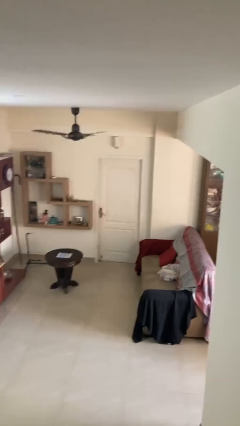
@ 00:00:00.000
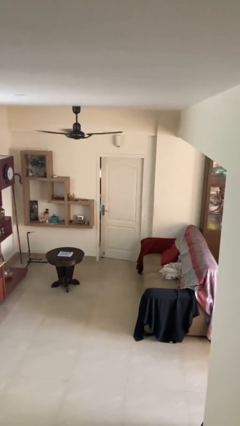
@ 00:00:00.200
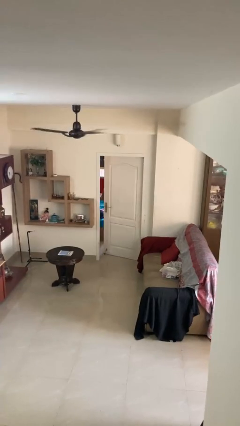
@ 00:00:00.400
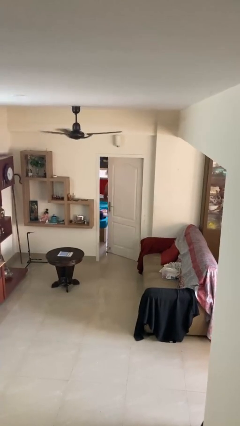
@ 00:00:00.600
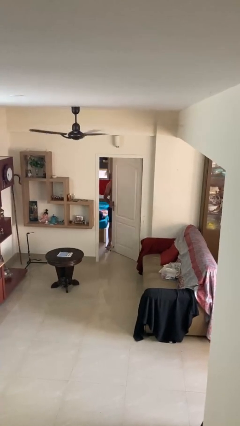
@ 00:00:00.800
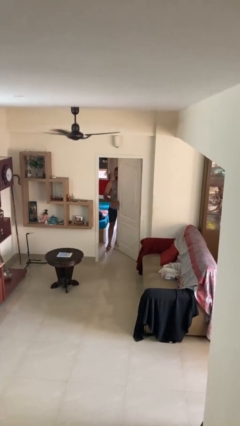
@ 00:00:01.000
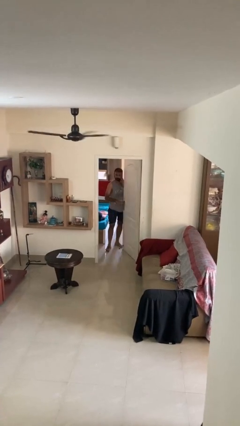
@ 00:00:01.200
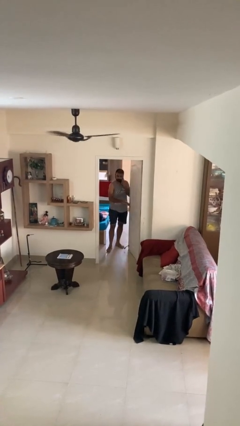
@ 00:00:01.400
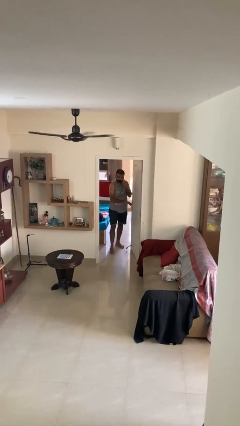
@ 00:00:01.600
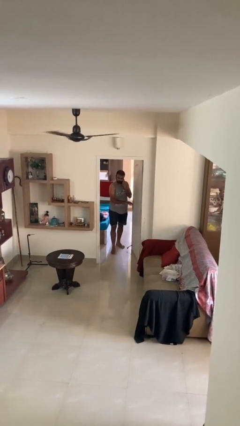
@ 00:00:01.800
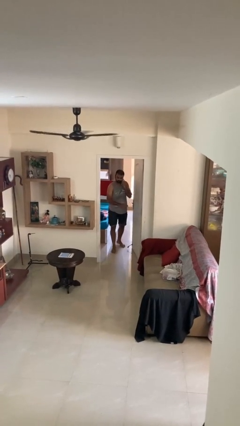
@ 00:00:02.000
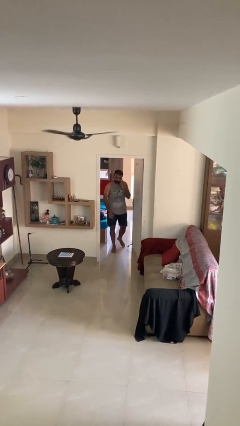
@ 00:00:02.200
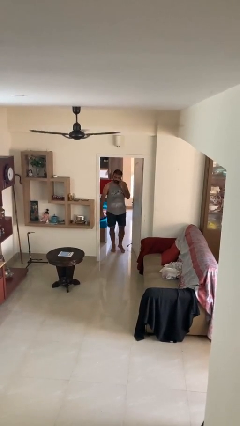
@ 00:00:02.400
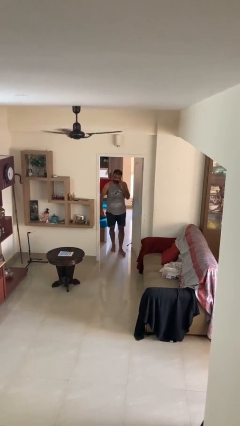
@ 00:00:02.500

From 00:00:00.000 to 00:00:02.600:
person opens facility door

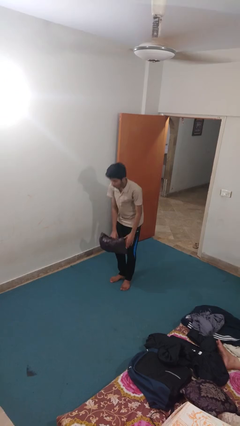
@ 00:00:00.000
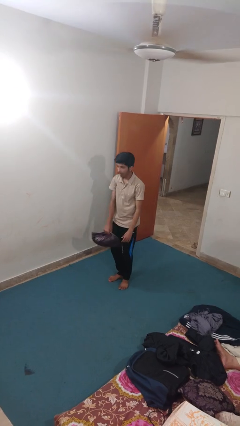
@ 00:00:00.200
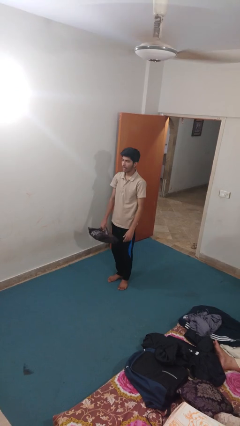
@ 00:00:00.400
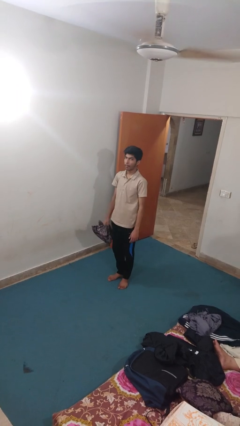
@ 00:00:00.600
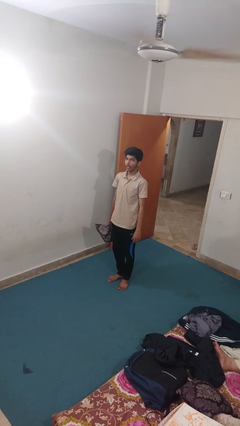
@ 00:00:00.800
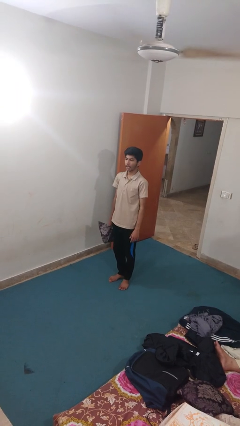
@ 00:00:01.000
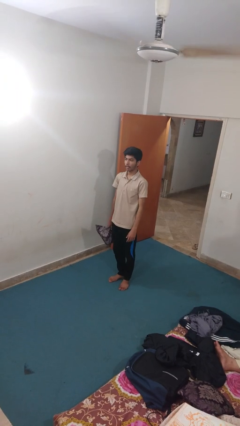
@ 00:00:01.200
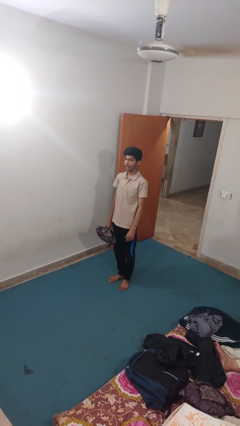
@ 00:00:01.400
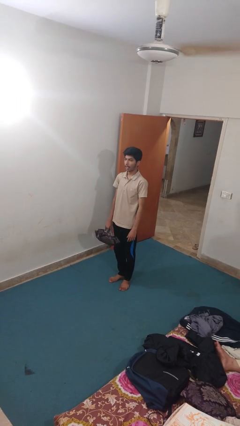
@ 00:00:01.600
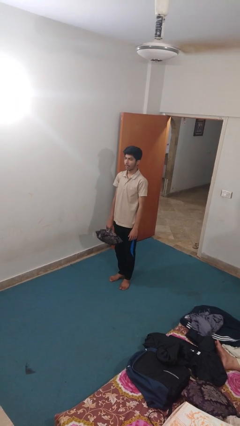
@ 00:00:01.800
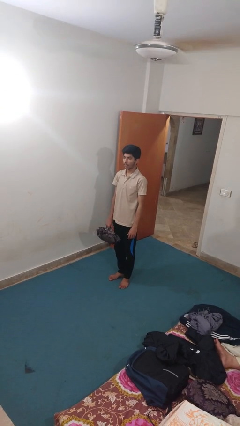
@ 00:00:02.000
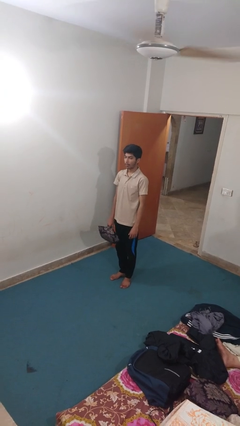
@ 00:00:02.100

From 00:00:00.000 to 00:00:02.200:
person picks up object from floor

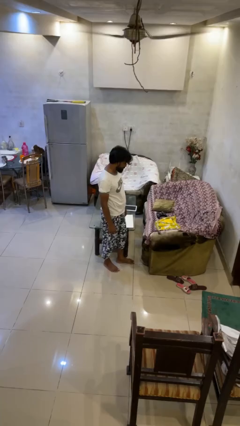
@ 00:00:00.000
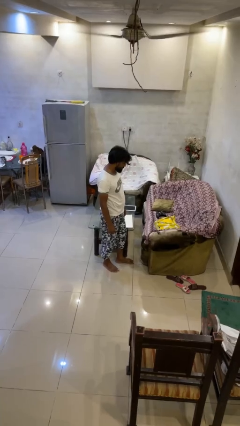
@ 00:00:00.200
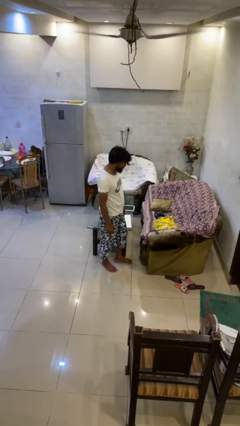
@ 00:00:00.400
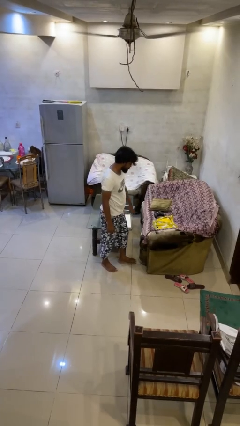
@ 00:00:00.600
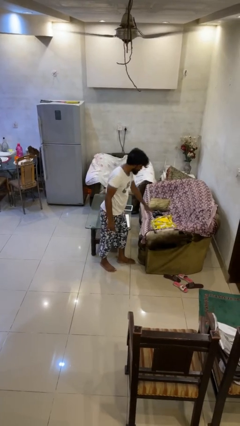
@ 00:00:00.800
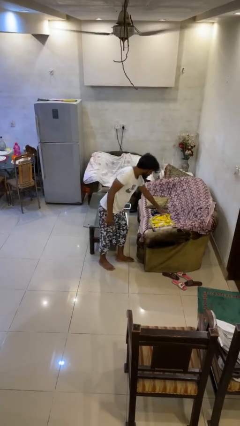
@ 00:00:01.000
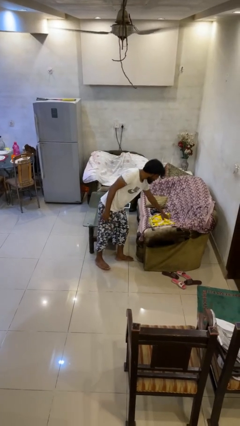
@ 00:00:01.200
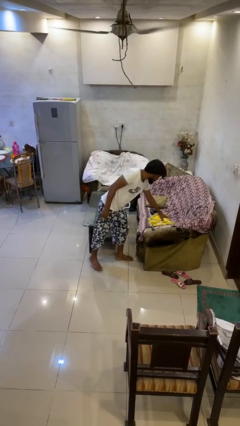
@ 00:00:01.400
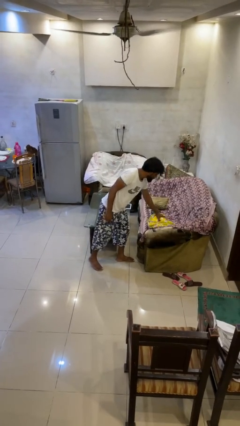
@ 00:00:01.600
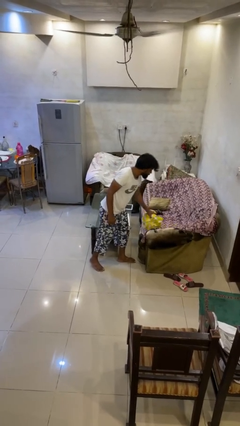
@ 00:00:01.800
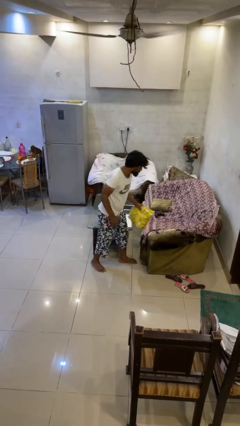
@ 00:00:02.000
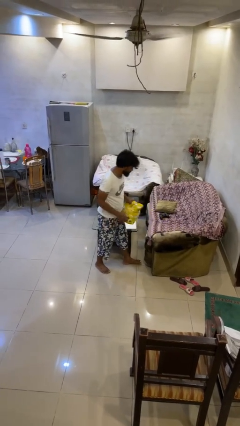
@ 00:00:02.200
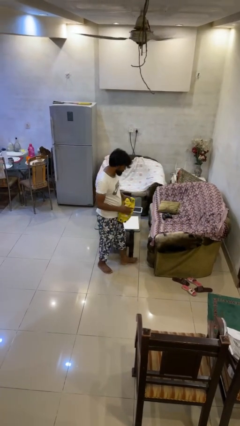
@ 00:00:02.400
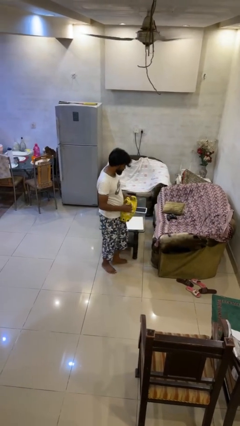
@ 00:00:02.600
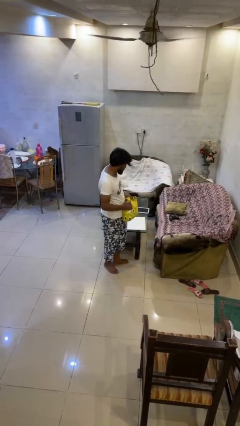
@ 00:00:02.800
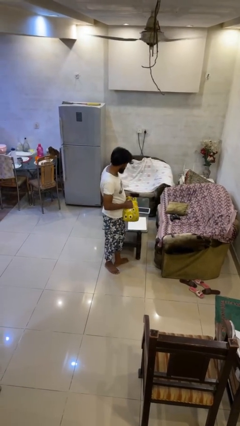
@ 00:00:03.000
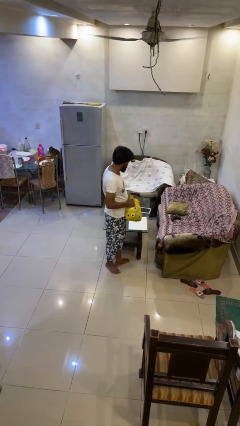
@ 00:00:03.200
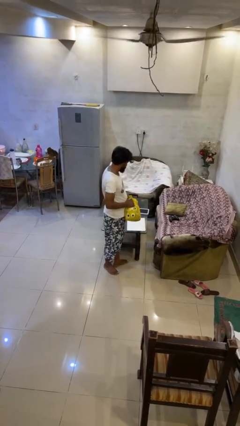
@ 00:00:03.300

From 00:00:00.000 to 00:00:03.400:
person picks up object from couch

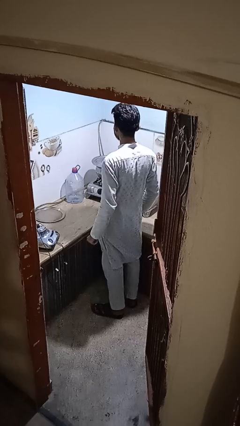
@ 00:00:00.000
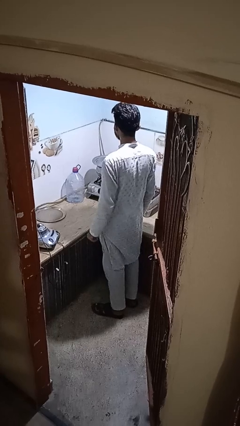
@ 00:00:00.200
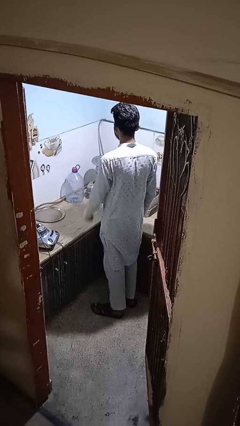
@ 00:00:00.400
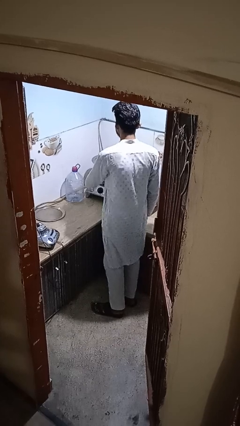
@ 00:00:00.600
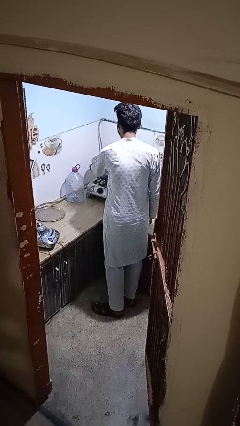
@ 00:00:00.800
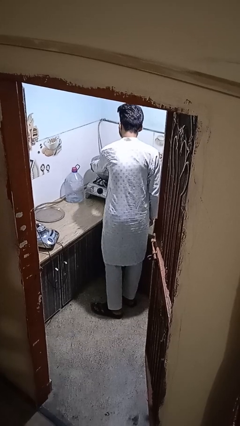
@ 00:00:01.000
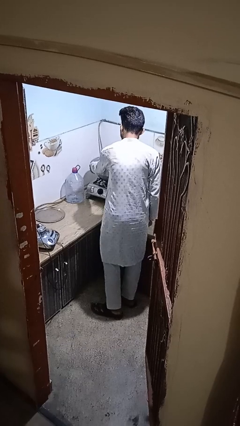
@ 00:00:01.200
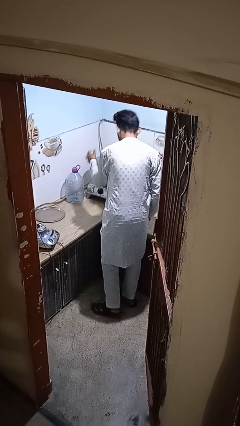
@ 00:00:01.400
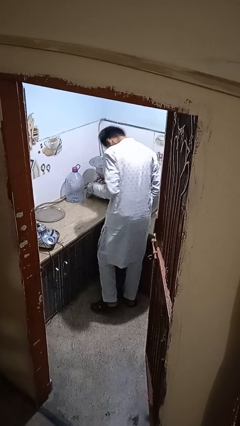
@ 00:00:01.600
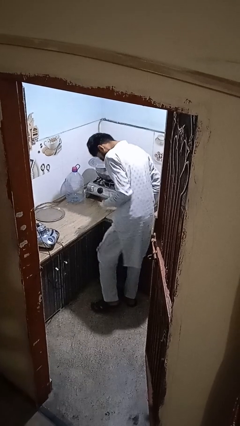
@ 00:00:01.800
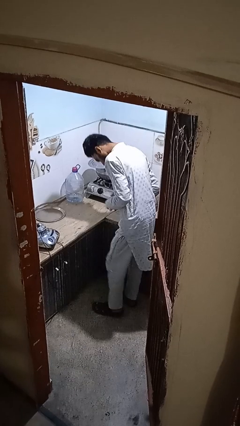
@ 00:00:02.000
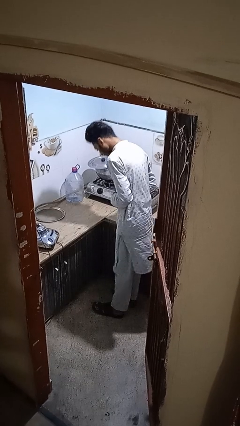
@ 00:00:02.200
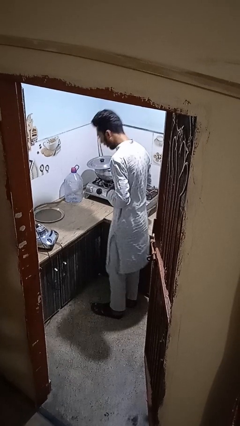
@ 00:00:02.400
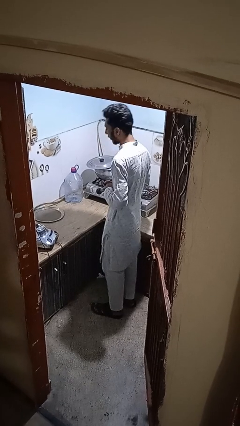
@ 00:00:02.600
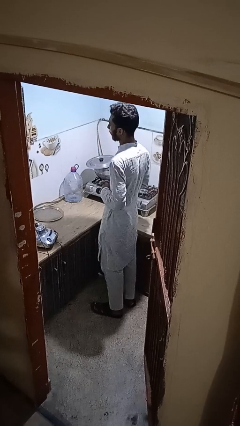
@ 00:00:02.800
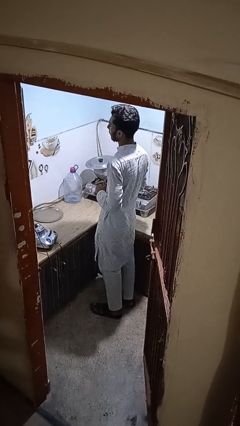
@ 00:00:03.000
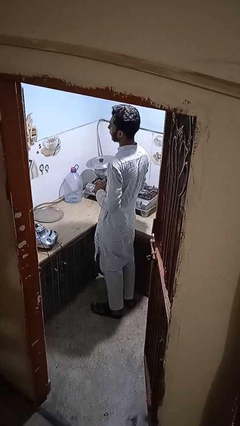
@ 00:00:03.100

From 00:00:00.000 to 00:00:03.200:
person burns hand

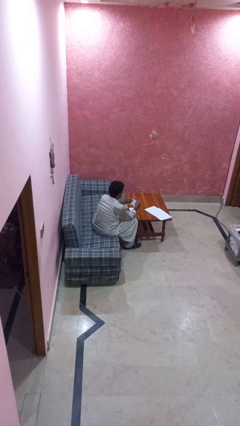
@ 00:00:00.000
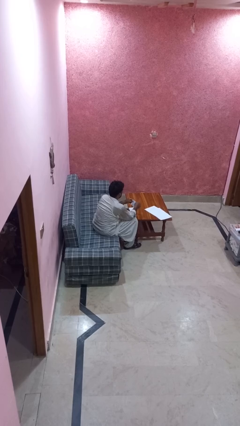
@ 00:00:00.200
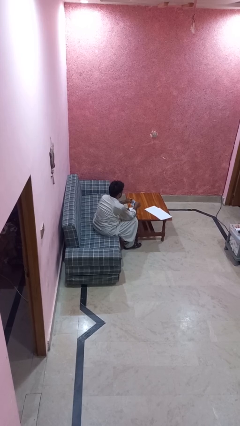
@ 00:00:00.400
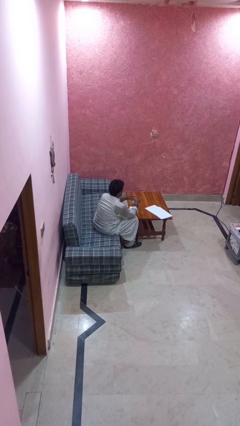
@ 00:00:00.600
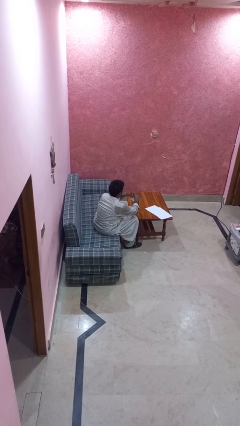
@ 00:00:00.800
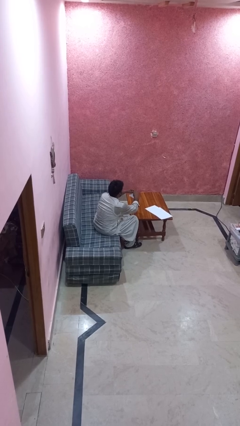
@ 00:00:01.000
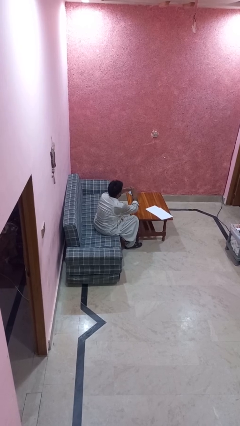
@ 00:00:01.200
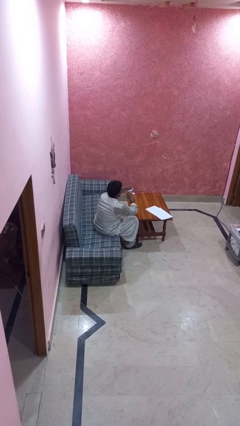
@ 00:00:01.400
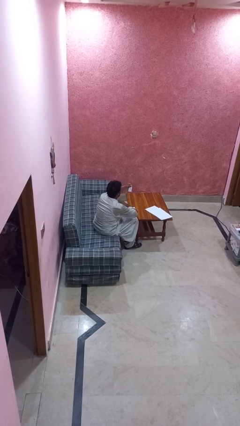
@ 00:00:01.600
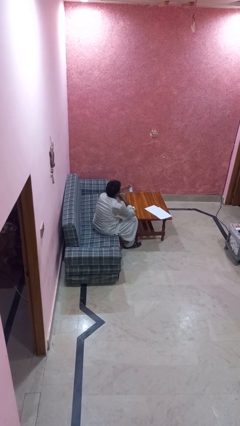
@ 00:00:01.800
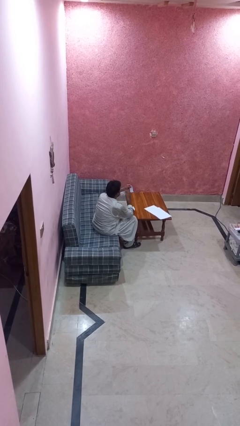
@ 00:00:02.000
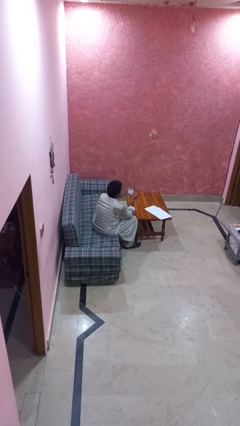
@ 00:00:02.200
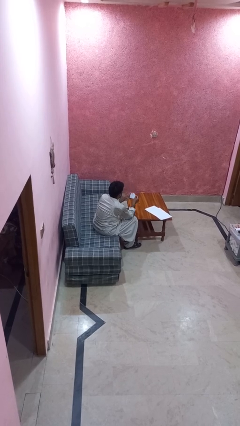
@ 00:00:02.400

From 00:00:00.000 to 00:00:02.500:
person tears paper

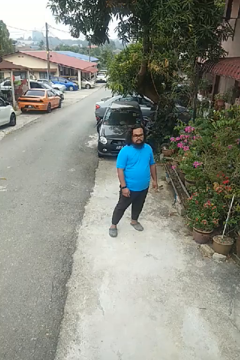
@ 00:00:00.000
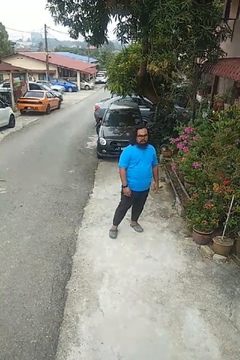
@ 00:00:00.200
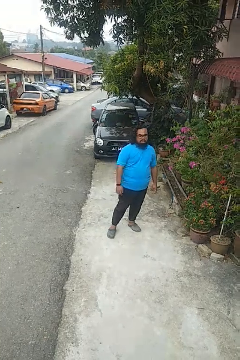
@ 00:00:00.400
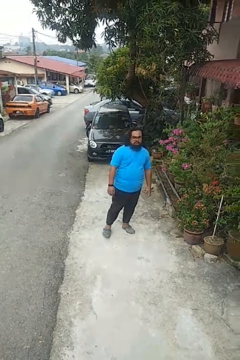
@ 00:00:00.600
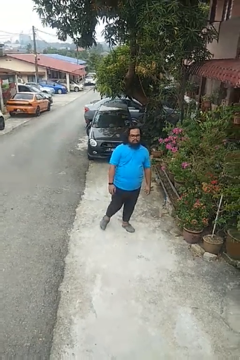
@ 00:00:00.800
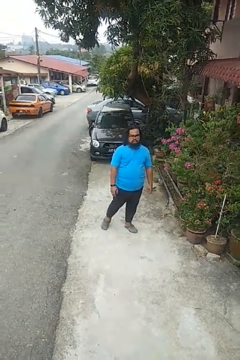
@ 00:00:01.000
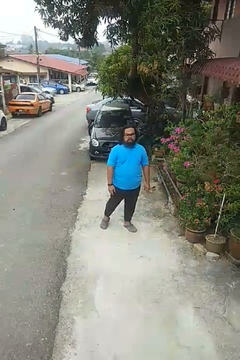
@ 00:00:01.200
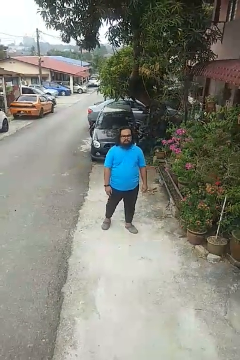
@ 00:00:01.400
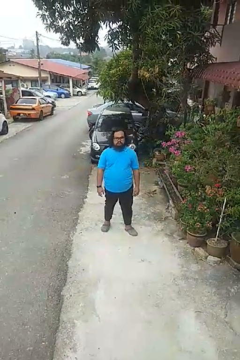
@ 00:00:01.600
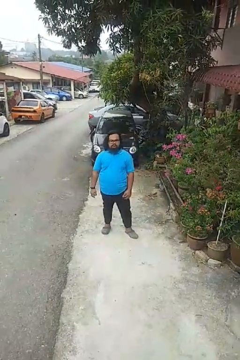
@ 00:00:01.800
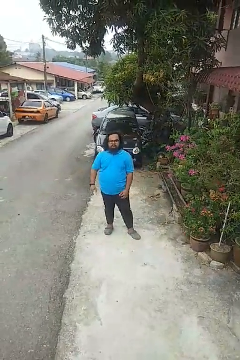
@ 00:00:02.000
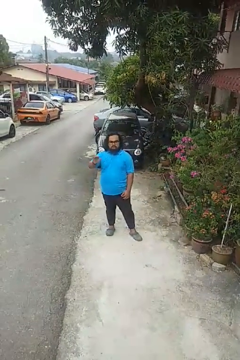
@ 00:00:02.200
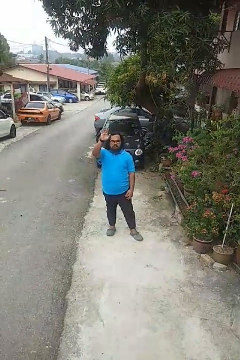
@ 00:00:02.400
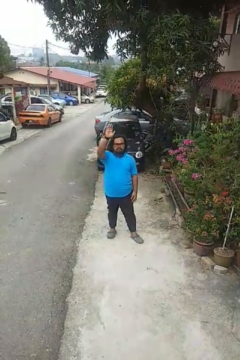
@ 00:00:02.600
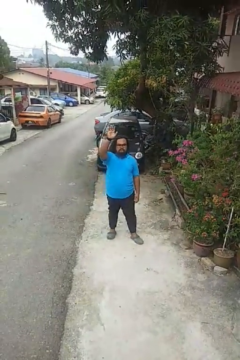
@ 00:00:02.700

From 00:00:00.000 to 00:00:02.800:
person gestures raise hand

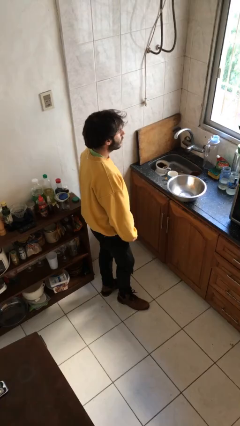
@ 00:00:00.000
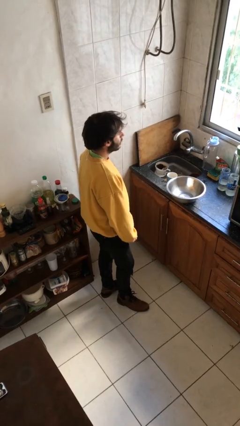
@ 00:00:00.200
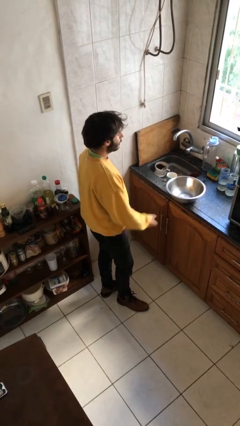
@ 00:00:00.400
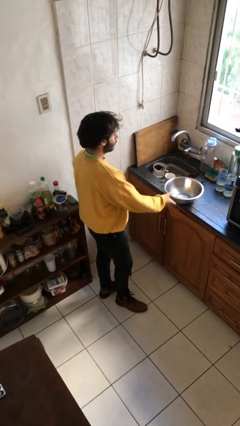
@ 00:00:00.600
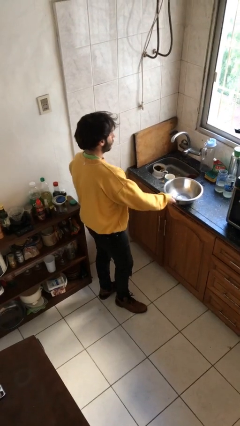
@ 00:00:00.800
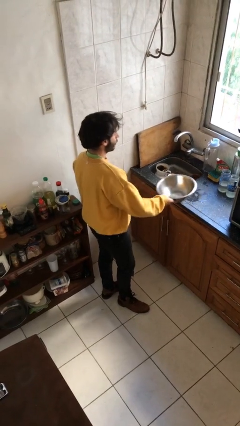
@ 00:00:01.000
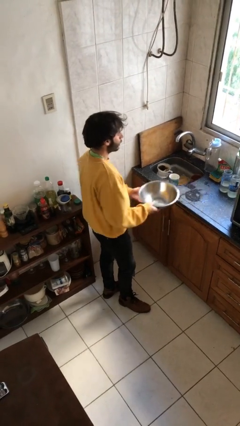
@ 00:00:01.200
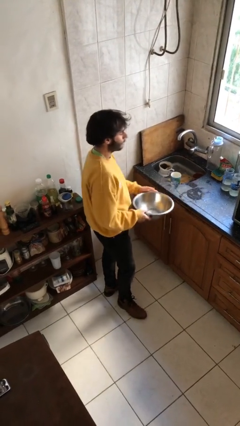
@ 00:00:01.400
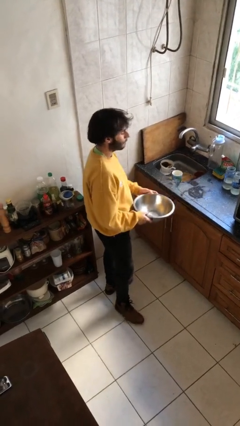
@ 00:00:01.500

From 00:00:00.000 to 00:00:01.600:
person picks up object from countertop
